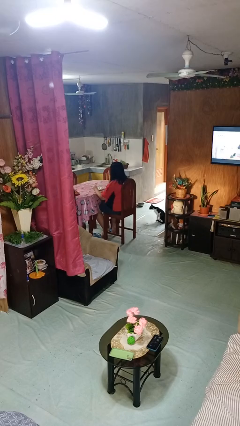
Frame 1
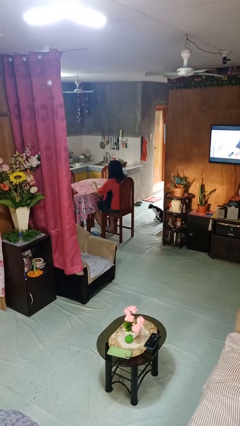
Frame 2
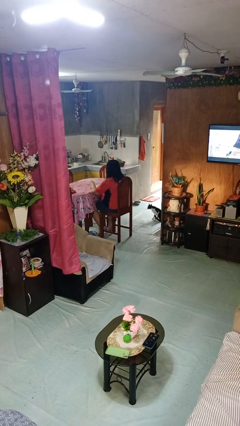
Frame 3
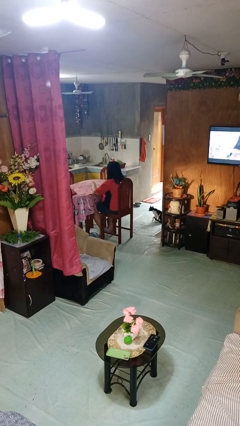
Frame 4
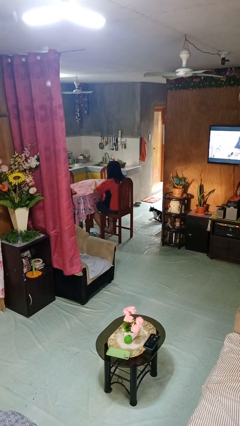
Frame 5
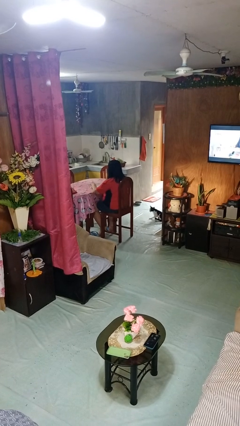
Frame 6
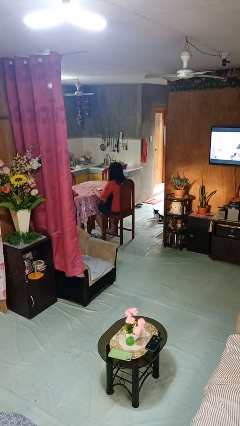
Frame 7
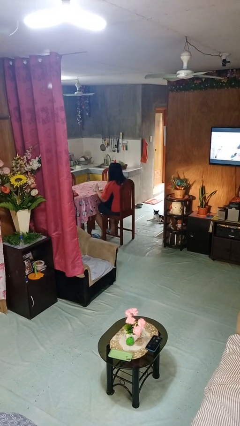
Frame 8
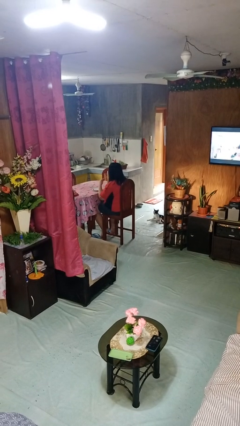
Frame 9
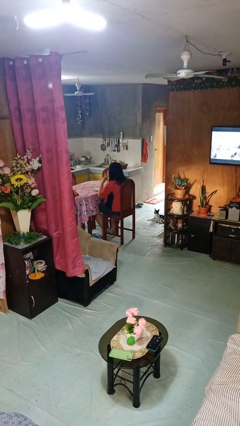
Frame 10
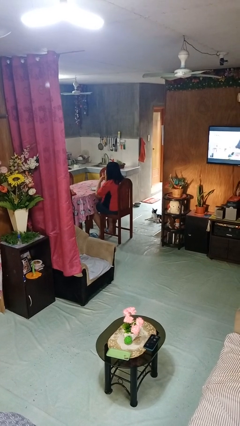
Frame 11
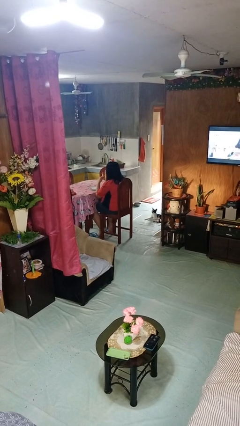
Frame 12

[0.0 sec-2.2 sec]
person eats with utensil

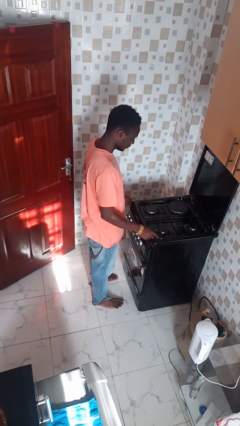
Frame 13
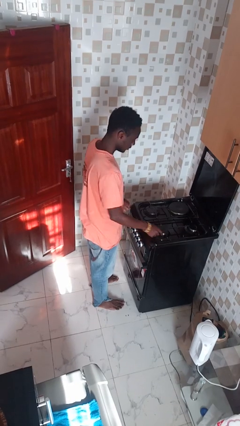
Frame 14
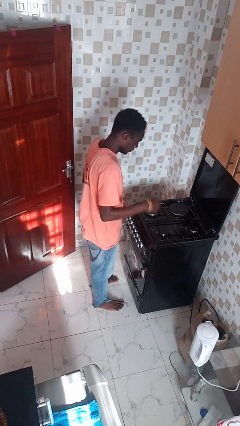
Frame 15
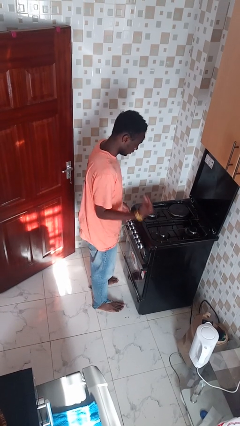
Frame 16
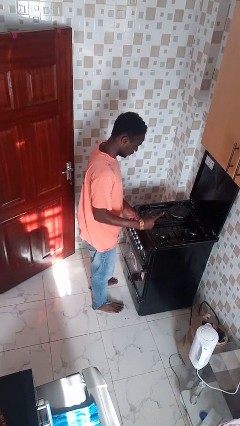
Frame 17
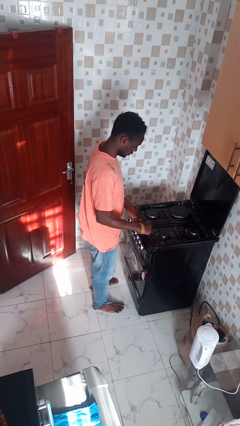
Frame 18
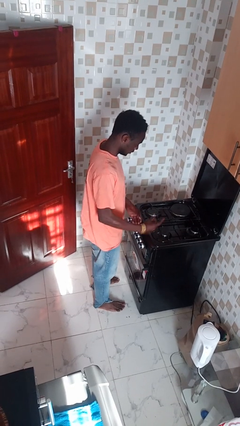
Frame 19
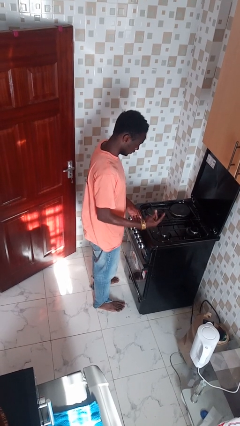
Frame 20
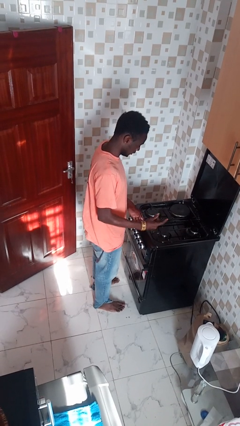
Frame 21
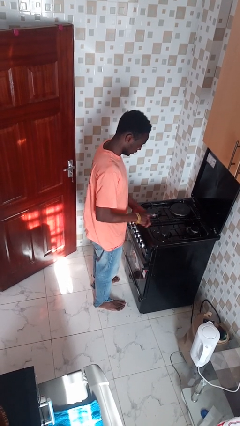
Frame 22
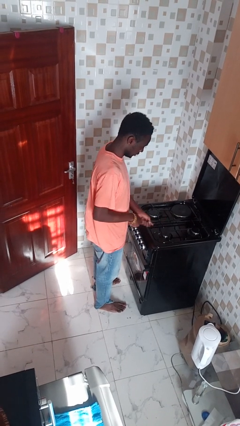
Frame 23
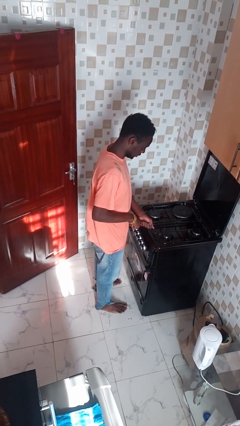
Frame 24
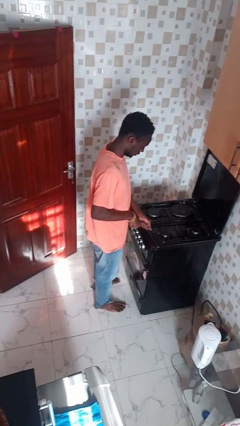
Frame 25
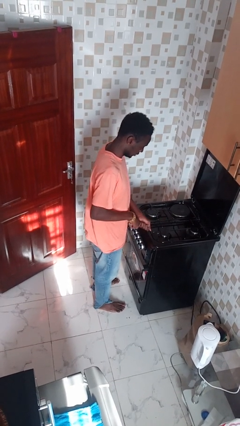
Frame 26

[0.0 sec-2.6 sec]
person burns hand

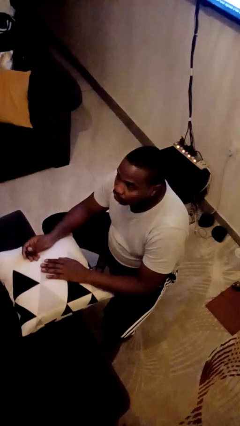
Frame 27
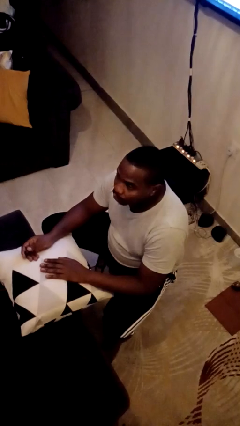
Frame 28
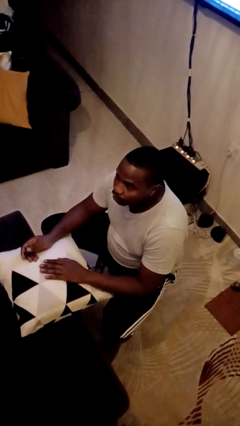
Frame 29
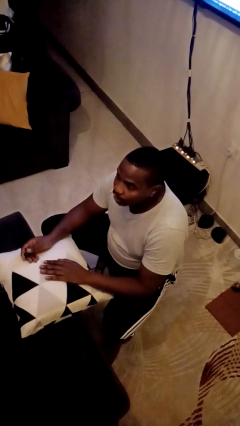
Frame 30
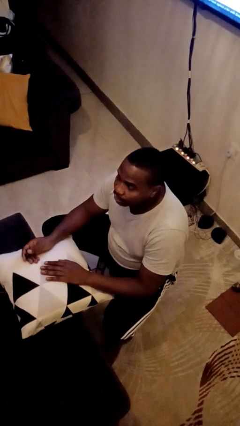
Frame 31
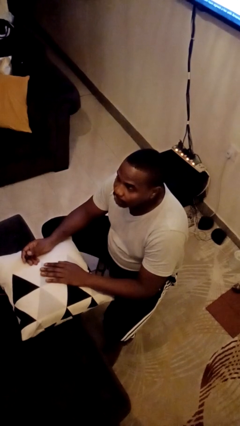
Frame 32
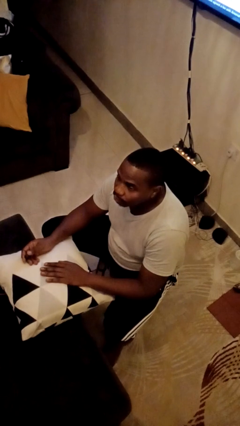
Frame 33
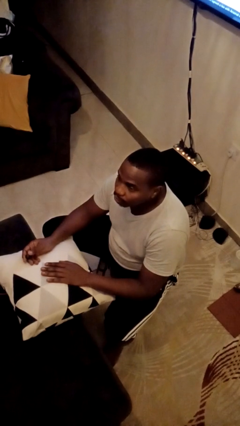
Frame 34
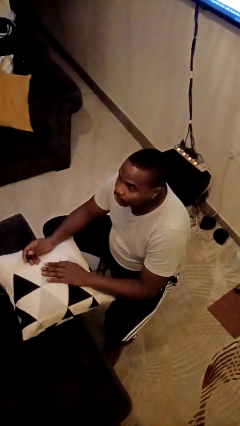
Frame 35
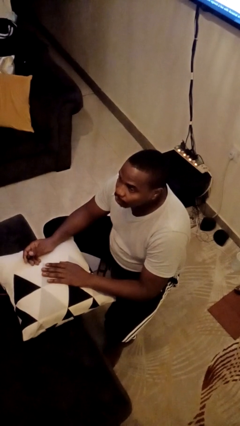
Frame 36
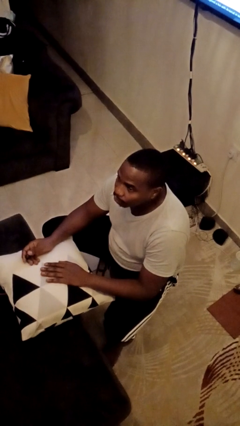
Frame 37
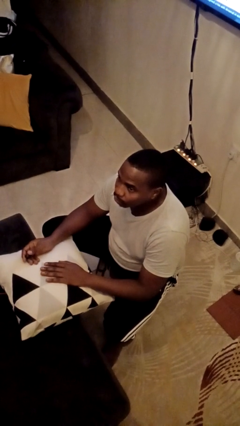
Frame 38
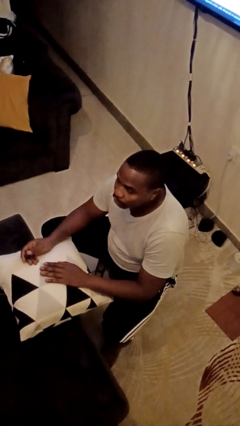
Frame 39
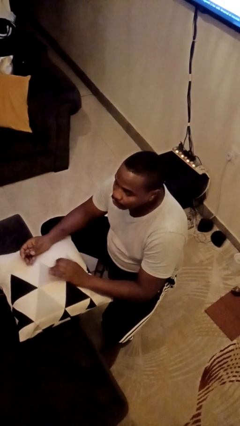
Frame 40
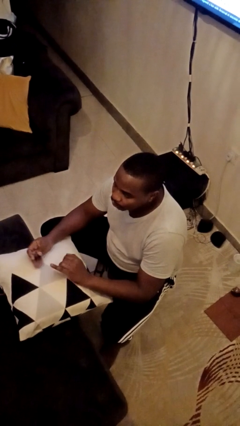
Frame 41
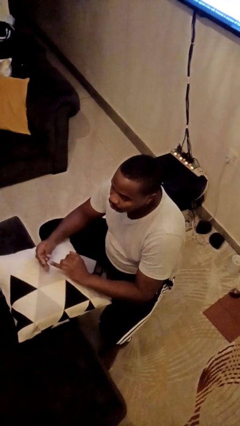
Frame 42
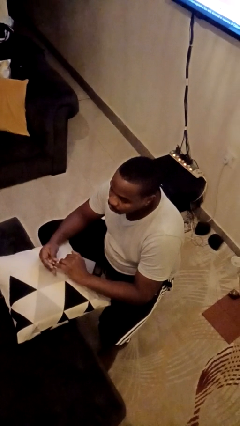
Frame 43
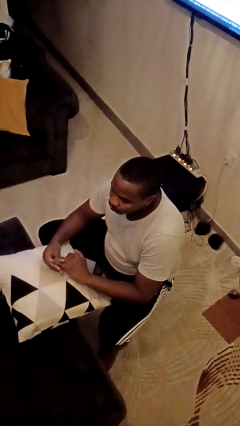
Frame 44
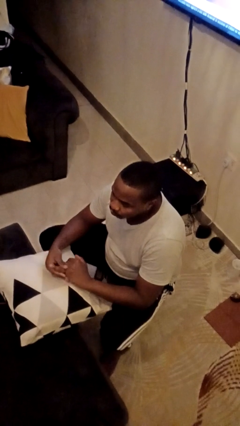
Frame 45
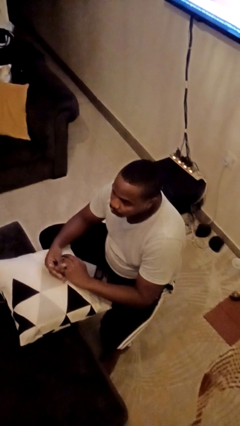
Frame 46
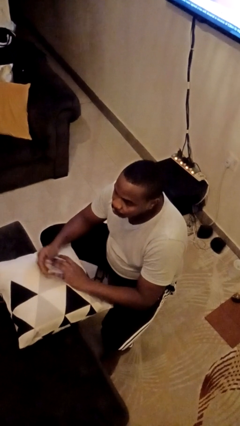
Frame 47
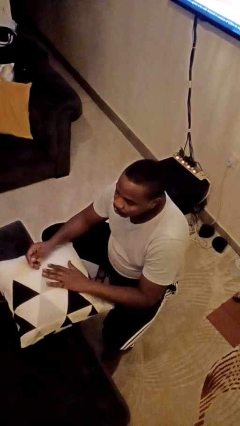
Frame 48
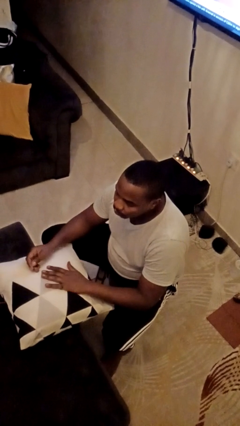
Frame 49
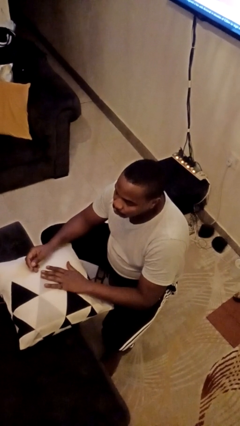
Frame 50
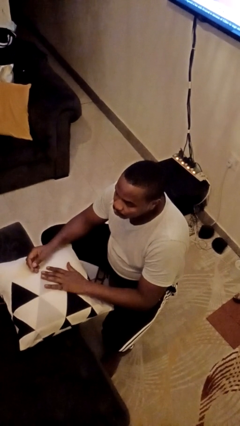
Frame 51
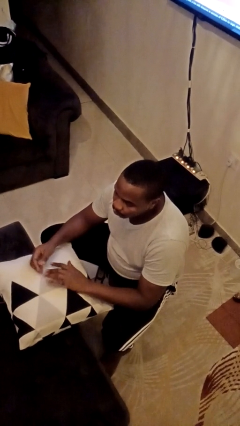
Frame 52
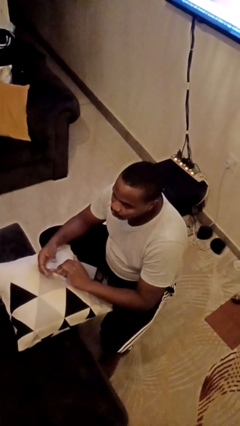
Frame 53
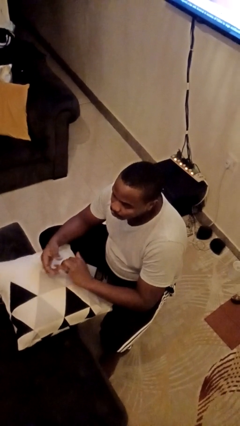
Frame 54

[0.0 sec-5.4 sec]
person puts on ring

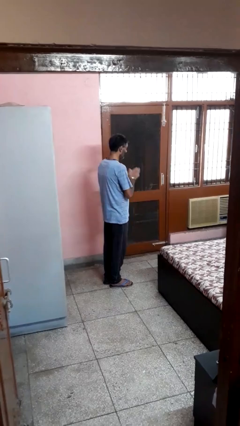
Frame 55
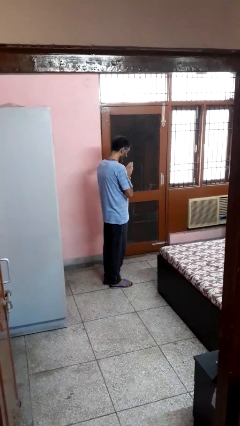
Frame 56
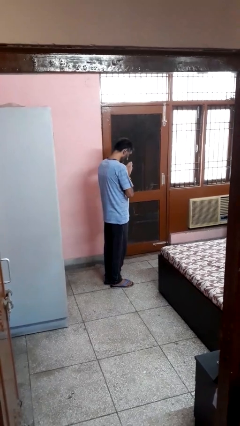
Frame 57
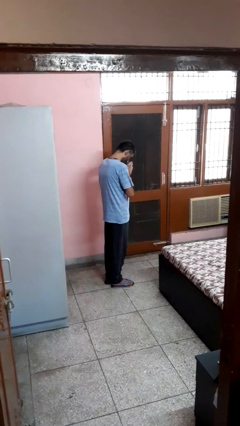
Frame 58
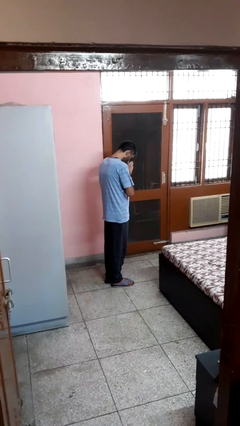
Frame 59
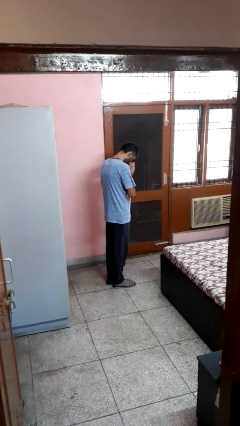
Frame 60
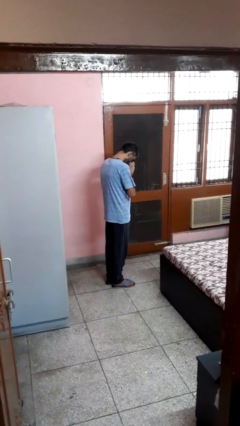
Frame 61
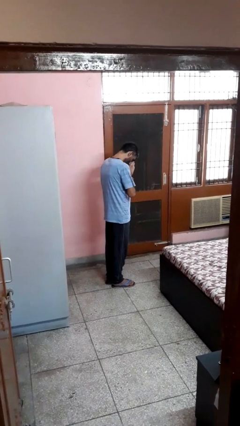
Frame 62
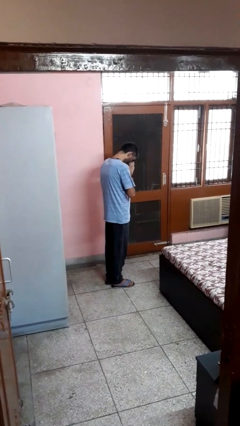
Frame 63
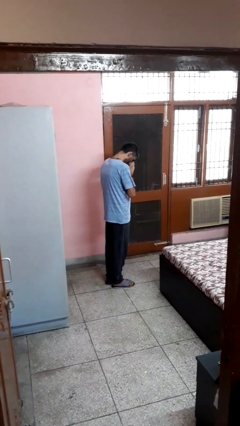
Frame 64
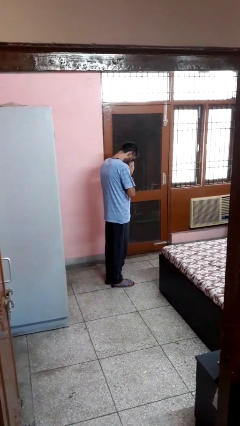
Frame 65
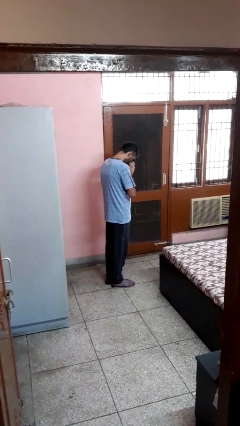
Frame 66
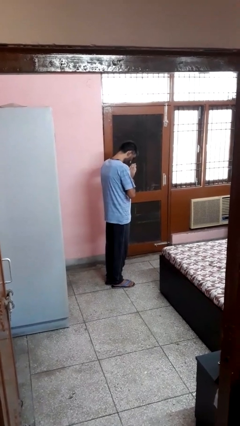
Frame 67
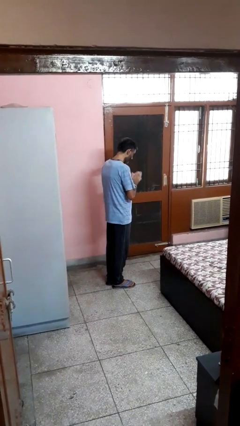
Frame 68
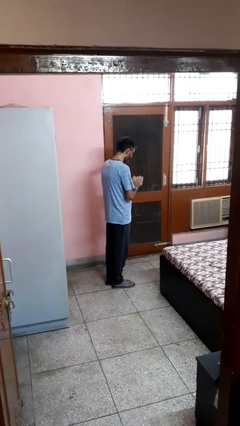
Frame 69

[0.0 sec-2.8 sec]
person prays

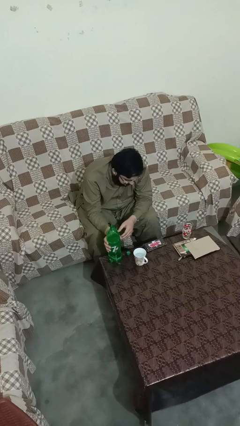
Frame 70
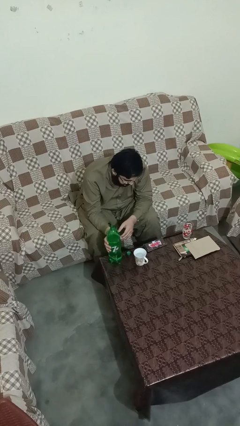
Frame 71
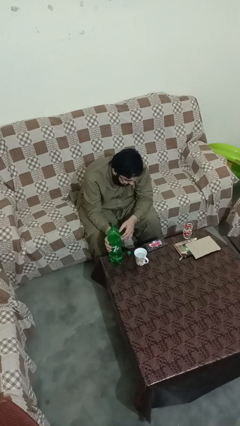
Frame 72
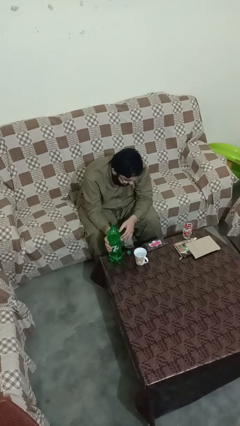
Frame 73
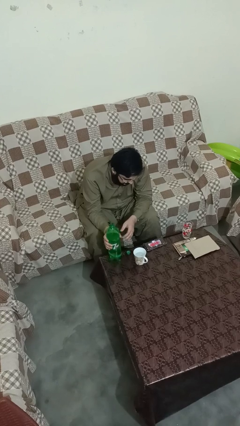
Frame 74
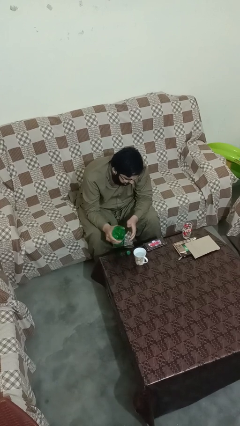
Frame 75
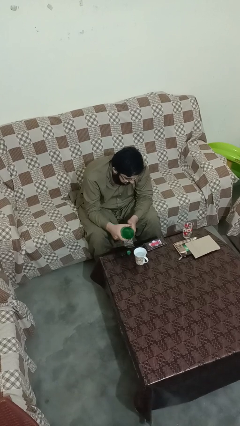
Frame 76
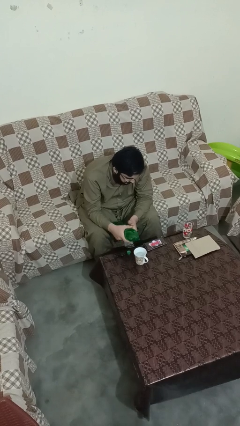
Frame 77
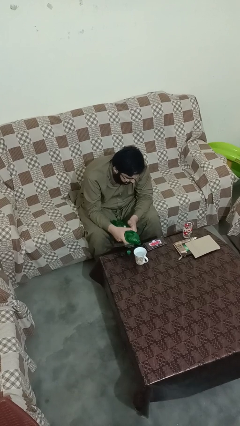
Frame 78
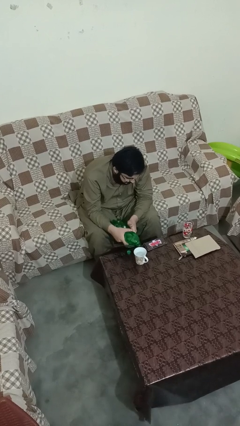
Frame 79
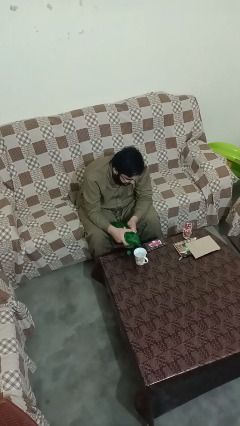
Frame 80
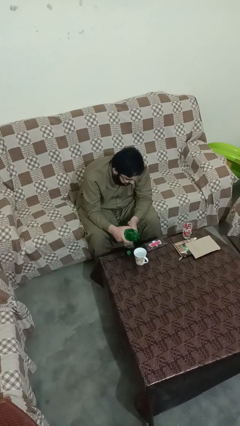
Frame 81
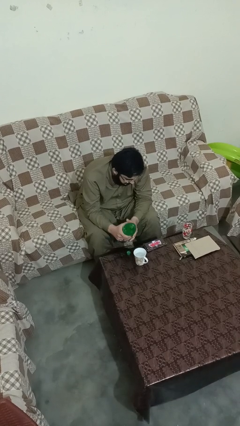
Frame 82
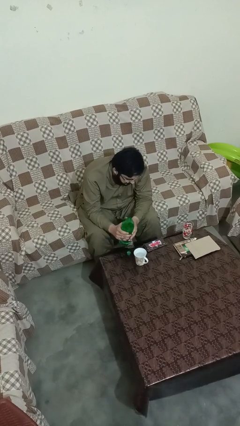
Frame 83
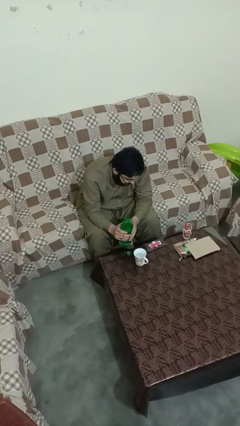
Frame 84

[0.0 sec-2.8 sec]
person pours liquid into cup

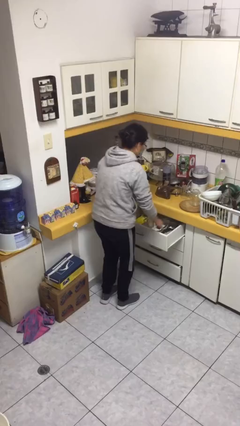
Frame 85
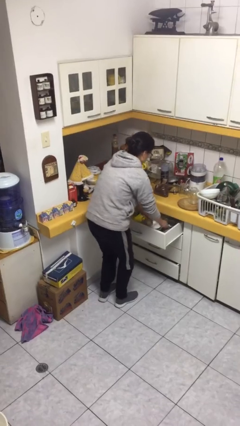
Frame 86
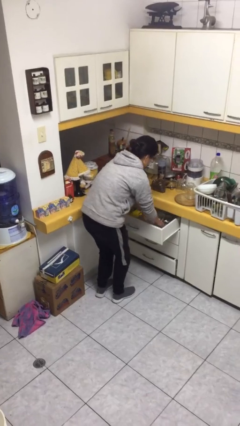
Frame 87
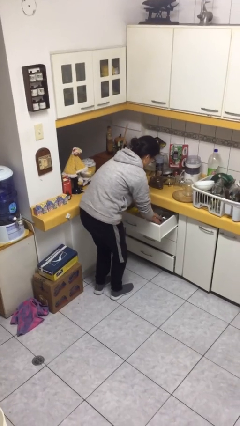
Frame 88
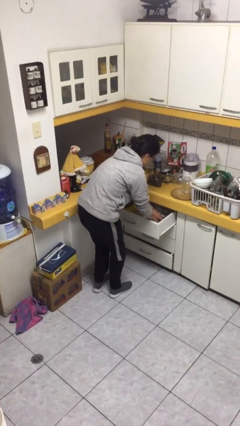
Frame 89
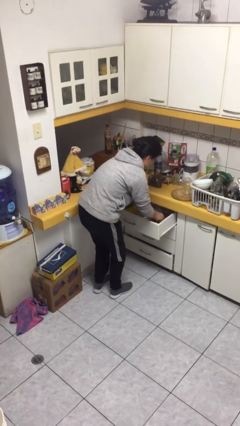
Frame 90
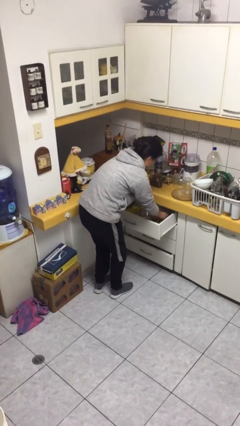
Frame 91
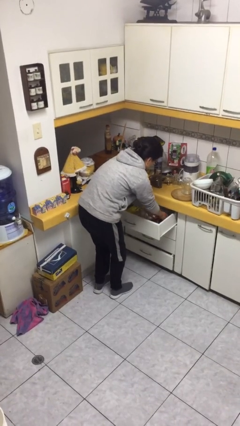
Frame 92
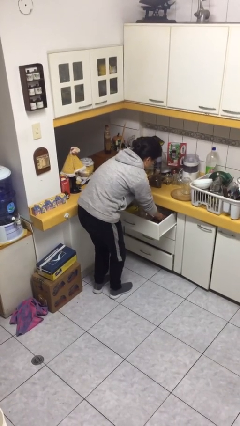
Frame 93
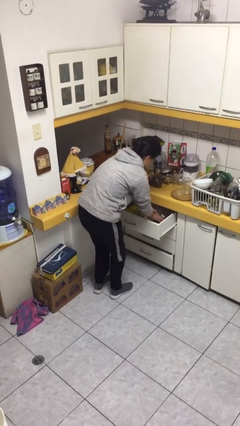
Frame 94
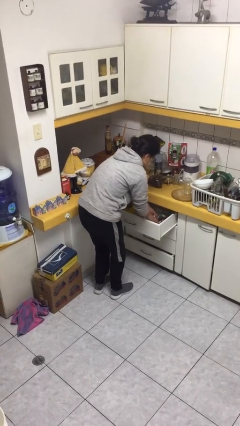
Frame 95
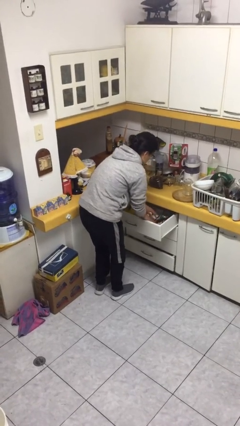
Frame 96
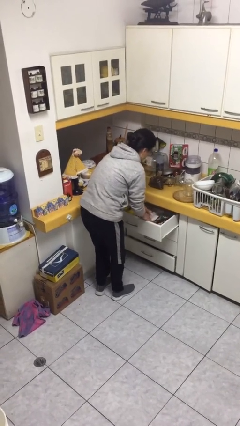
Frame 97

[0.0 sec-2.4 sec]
person searches in kitchen drawer
